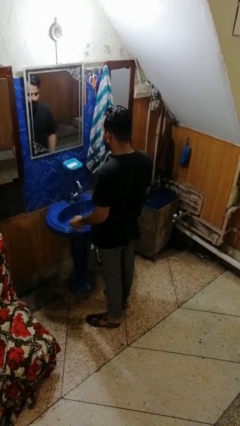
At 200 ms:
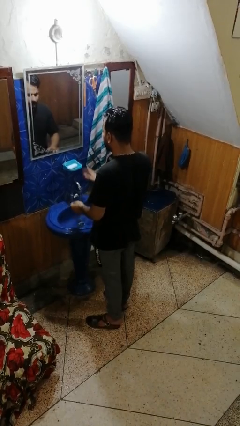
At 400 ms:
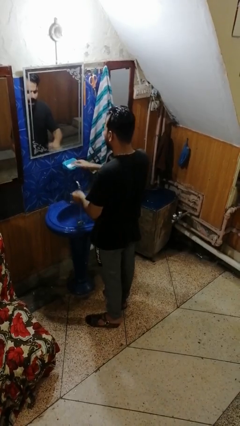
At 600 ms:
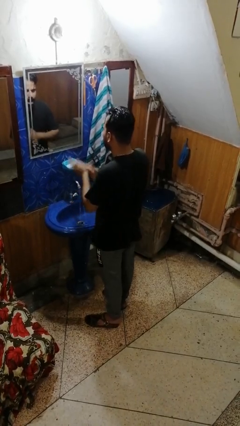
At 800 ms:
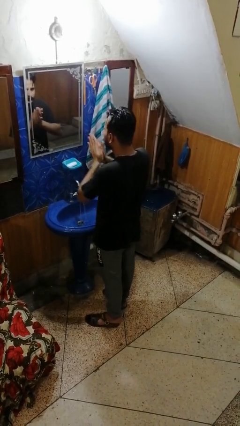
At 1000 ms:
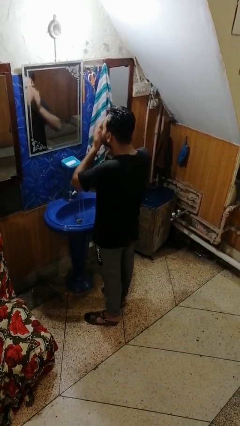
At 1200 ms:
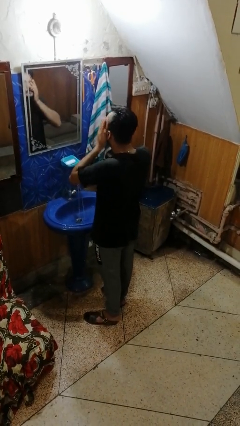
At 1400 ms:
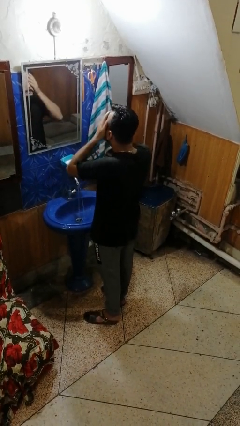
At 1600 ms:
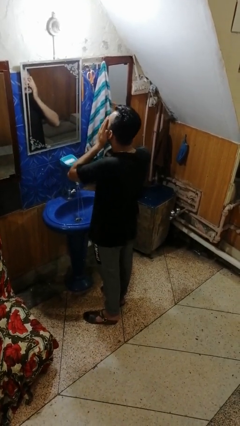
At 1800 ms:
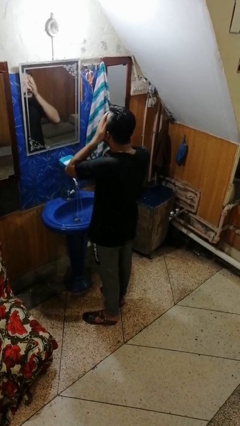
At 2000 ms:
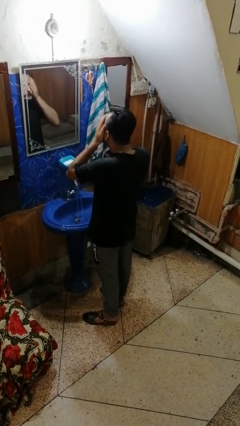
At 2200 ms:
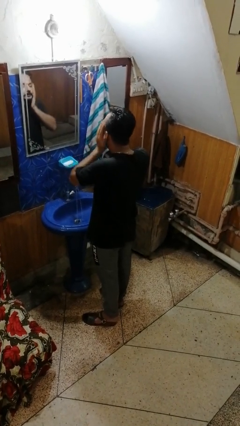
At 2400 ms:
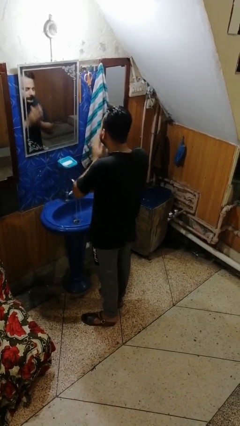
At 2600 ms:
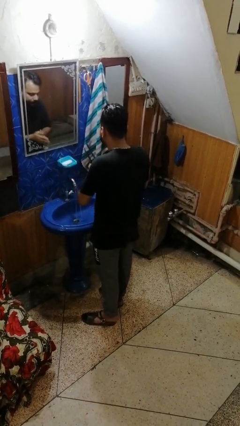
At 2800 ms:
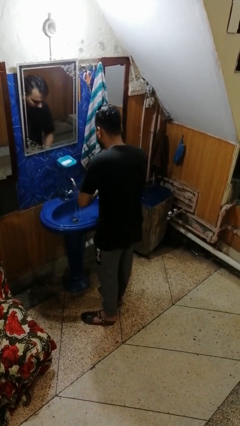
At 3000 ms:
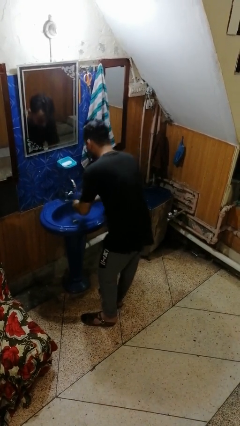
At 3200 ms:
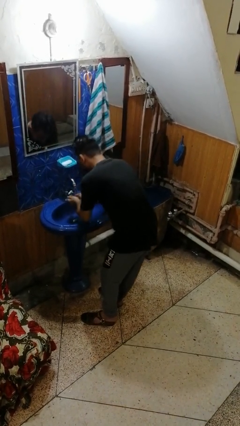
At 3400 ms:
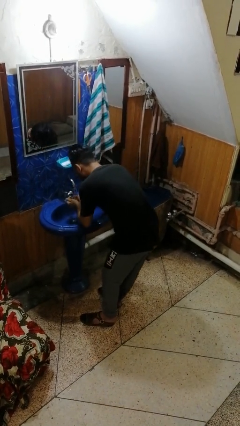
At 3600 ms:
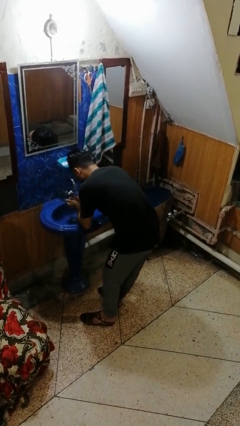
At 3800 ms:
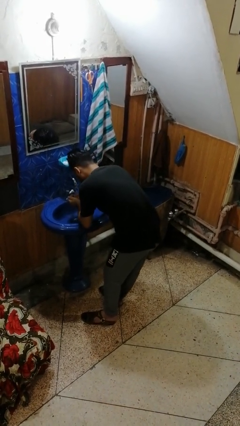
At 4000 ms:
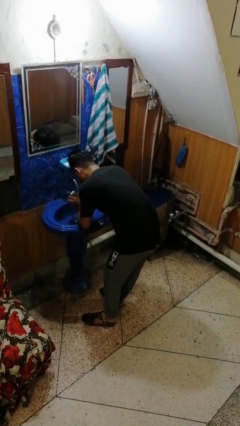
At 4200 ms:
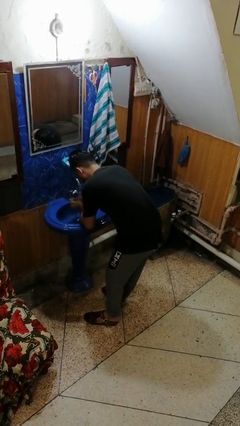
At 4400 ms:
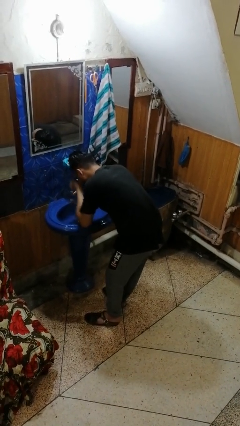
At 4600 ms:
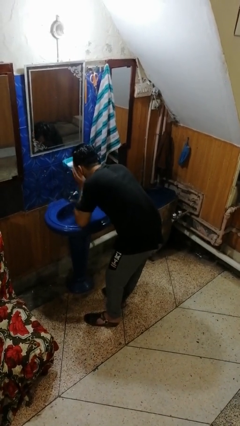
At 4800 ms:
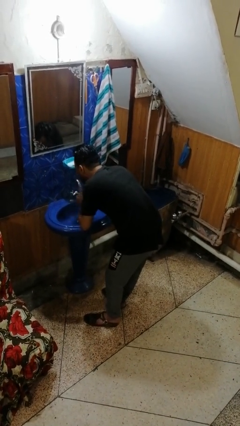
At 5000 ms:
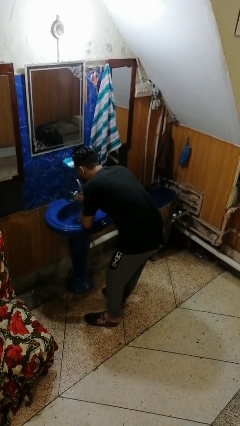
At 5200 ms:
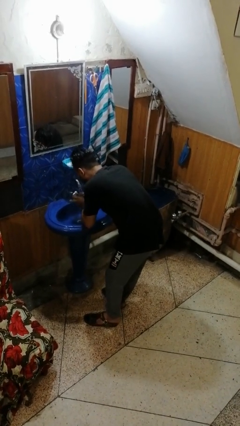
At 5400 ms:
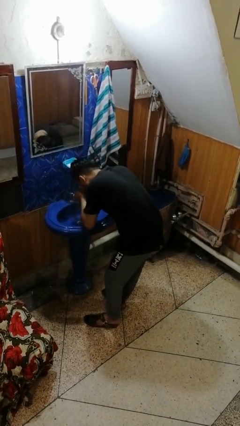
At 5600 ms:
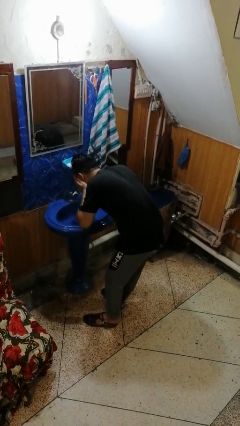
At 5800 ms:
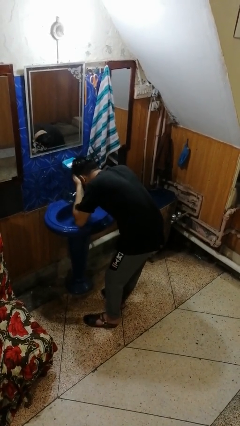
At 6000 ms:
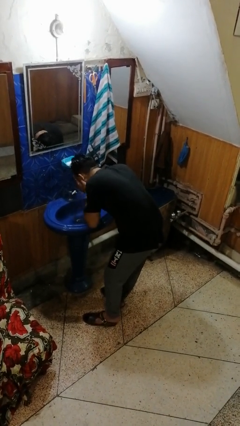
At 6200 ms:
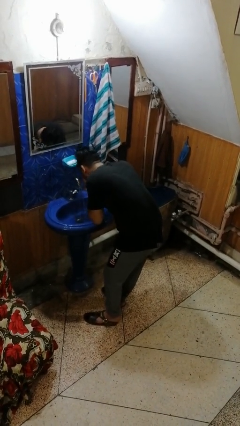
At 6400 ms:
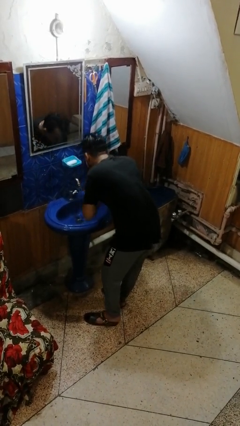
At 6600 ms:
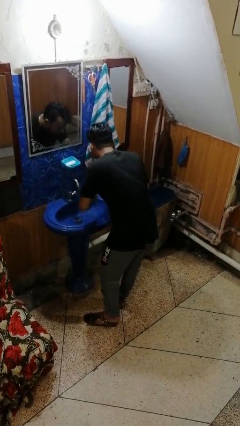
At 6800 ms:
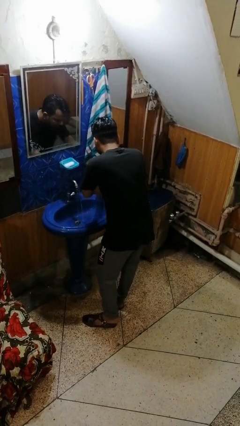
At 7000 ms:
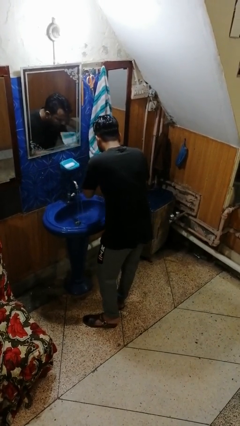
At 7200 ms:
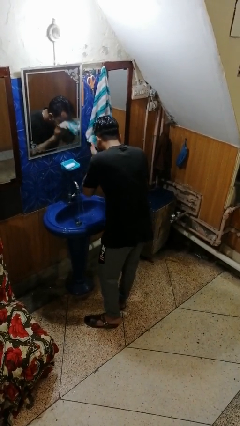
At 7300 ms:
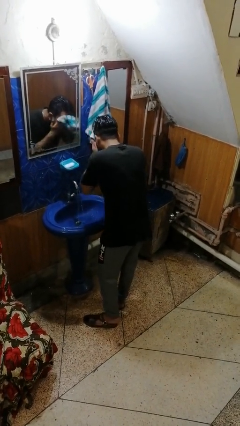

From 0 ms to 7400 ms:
person washes face

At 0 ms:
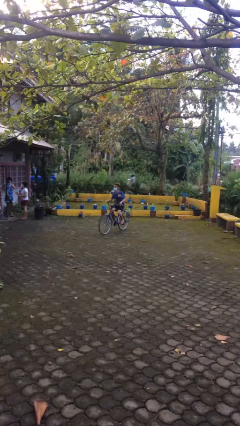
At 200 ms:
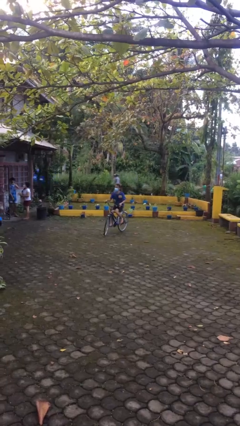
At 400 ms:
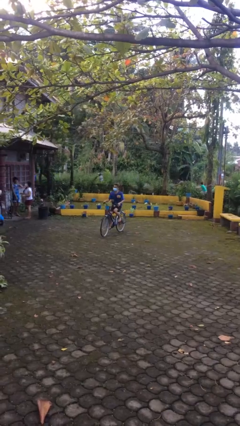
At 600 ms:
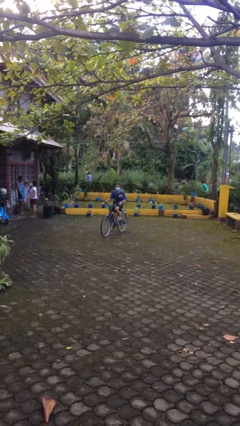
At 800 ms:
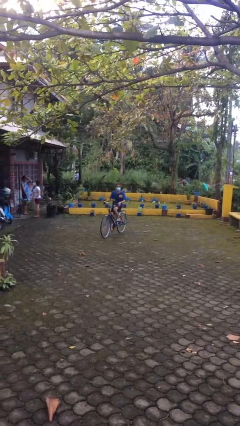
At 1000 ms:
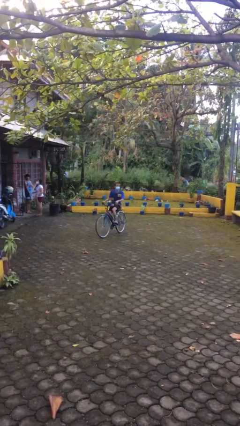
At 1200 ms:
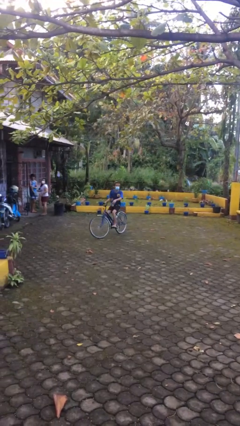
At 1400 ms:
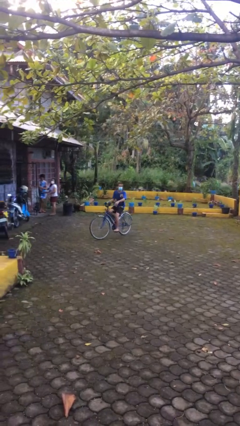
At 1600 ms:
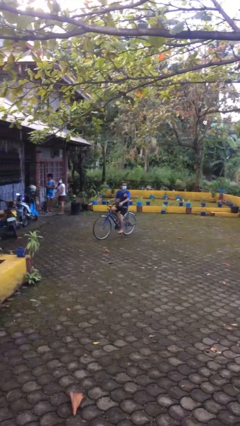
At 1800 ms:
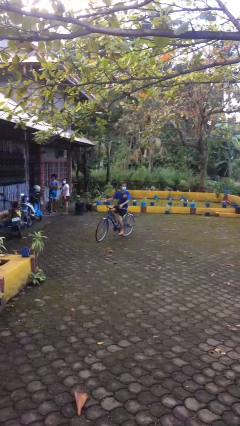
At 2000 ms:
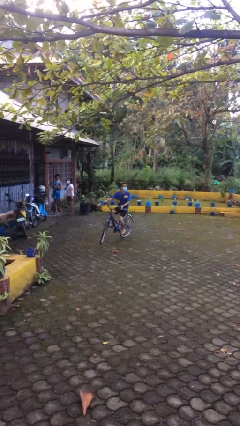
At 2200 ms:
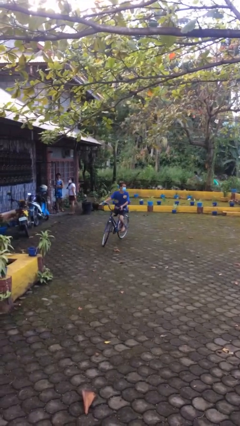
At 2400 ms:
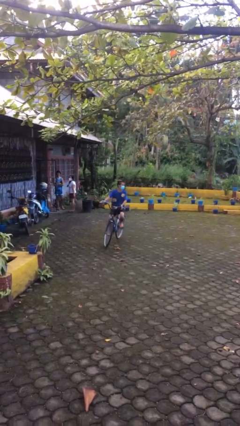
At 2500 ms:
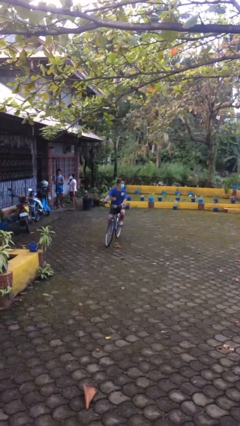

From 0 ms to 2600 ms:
person rides bicycle

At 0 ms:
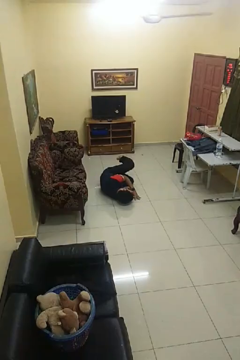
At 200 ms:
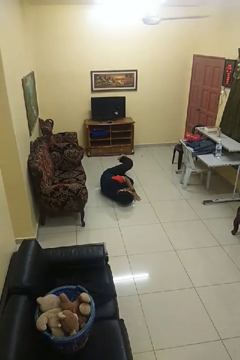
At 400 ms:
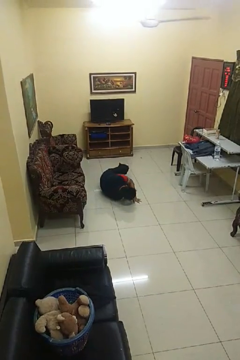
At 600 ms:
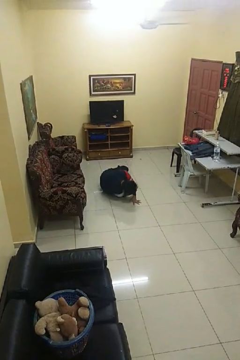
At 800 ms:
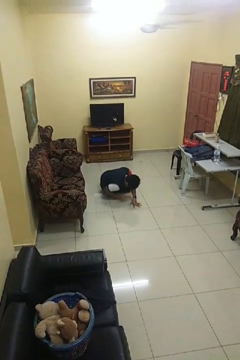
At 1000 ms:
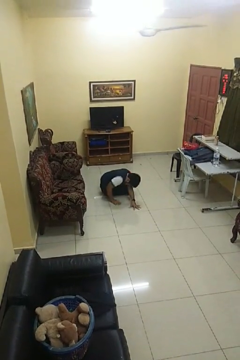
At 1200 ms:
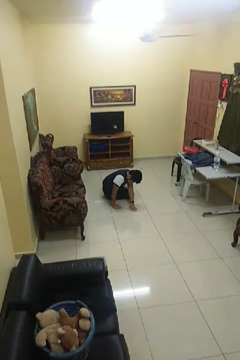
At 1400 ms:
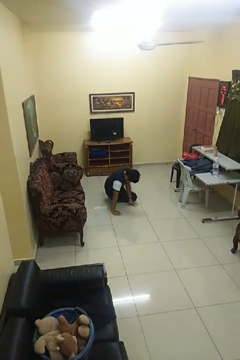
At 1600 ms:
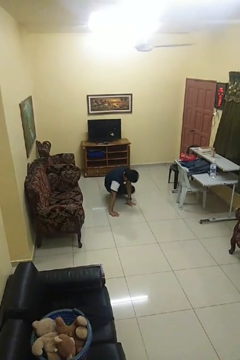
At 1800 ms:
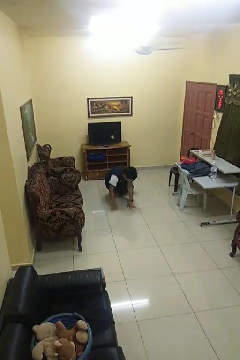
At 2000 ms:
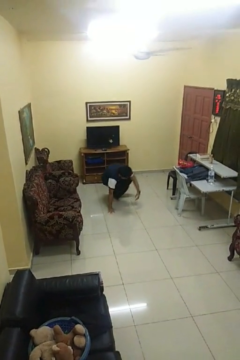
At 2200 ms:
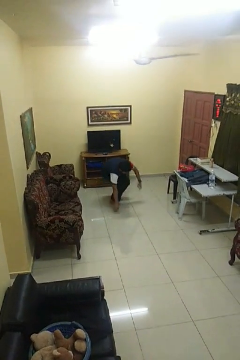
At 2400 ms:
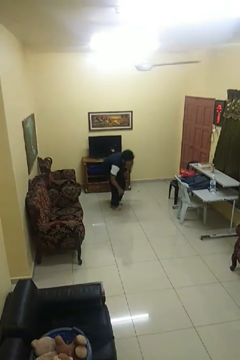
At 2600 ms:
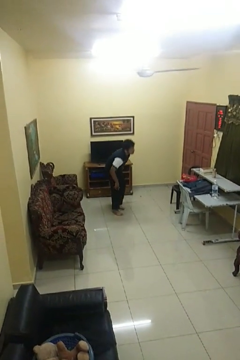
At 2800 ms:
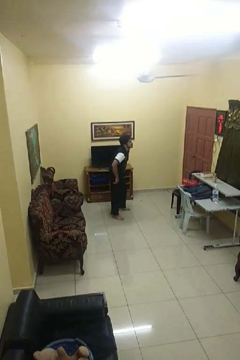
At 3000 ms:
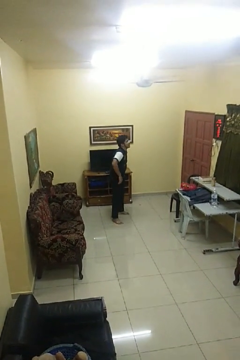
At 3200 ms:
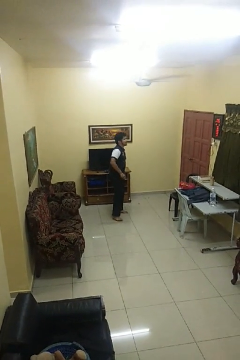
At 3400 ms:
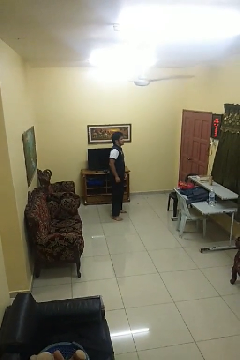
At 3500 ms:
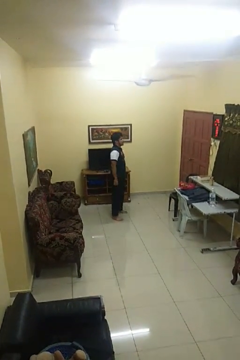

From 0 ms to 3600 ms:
person stands up from floor

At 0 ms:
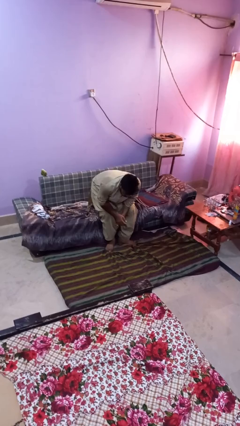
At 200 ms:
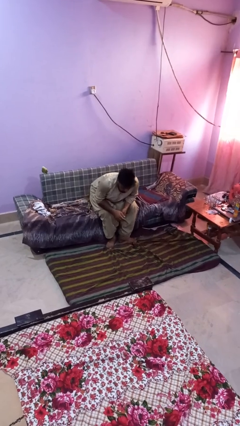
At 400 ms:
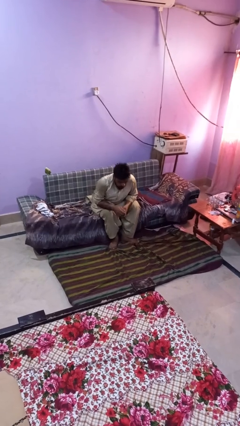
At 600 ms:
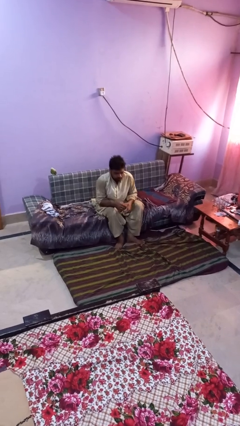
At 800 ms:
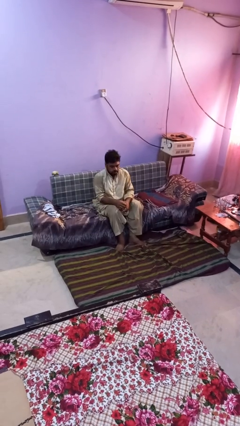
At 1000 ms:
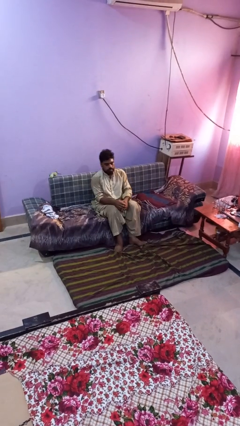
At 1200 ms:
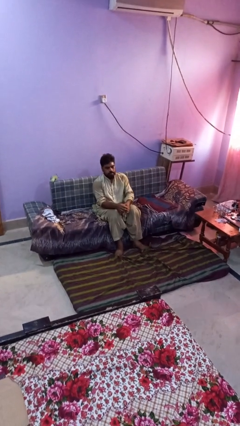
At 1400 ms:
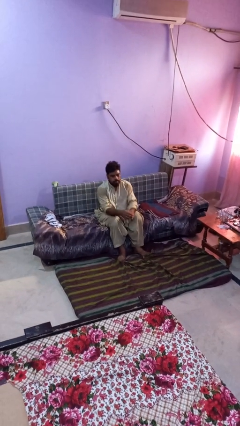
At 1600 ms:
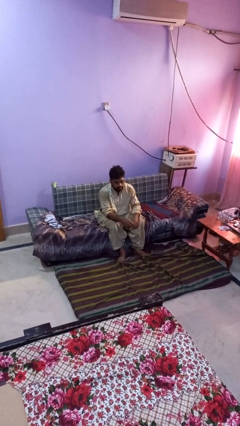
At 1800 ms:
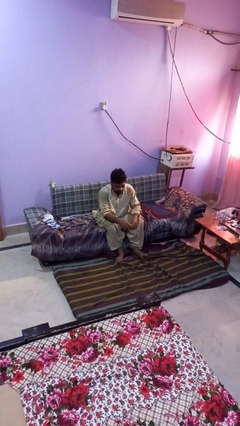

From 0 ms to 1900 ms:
person sits down

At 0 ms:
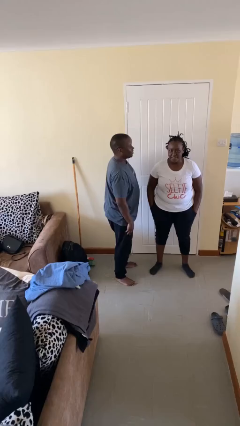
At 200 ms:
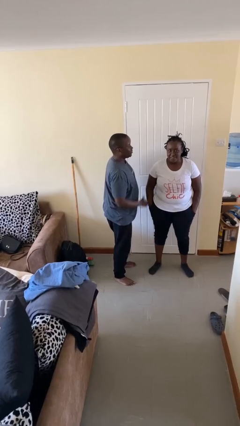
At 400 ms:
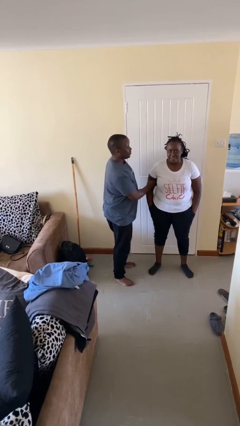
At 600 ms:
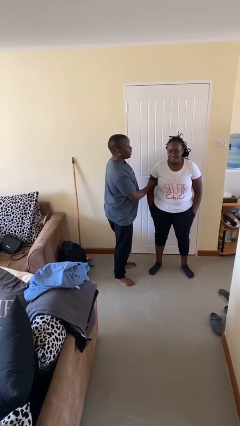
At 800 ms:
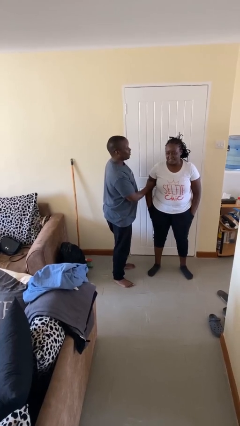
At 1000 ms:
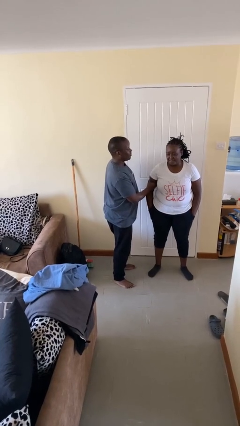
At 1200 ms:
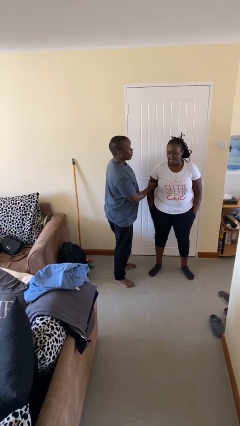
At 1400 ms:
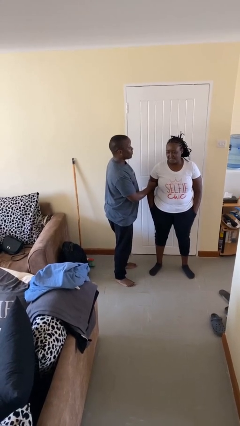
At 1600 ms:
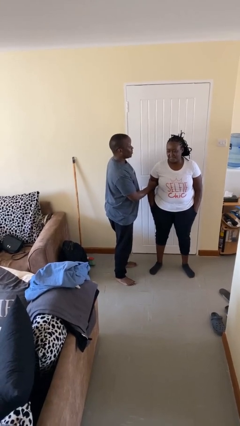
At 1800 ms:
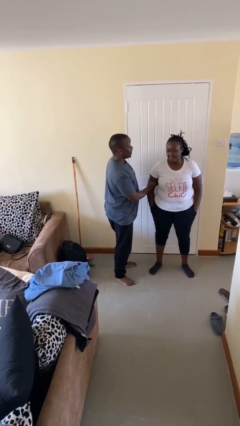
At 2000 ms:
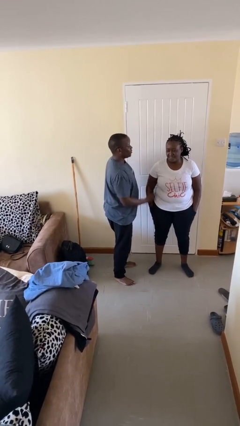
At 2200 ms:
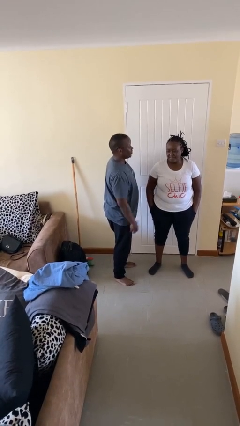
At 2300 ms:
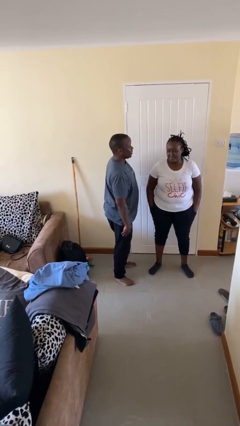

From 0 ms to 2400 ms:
person grabs person by bicep

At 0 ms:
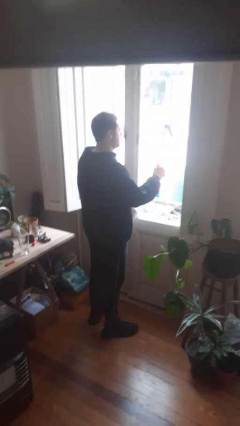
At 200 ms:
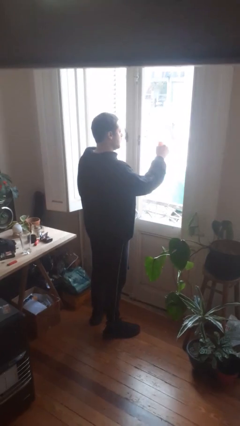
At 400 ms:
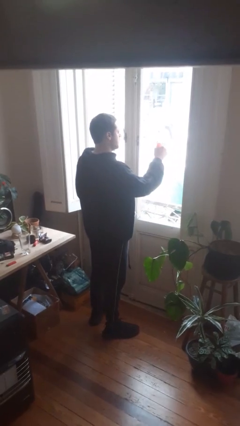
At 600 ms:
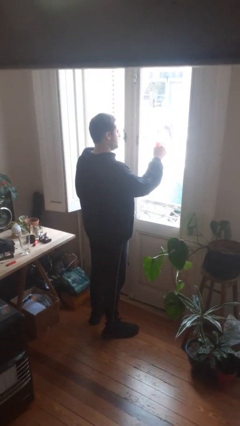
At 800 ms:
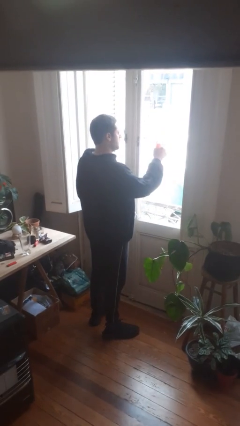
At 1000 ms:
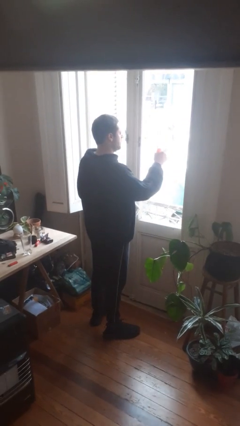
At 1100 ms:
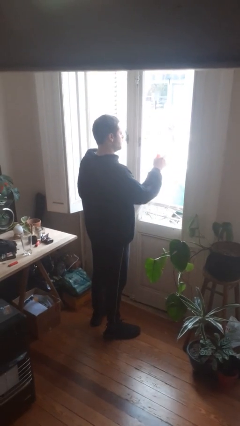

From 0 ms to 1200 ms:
person sprays from bottle
